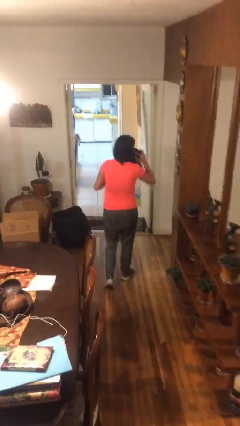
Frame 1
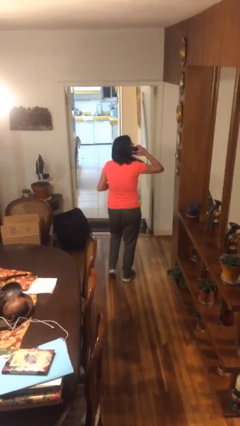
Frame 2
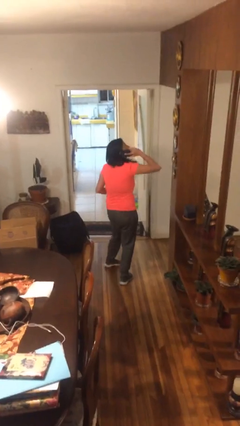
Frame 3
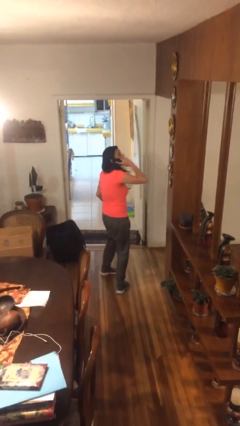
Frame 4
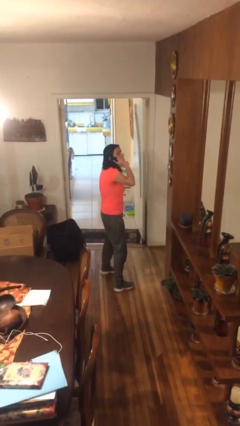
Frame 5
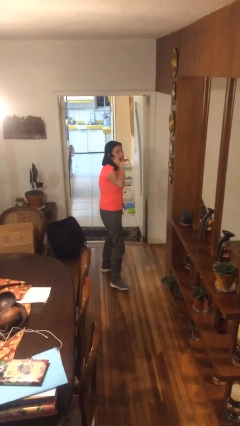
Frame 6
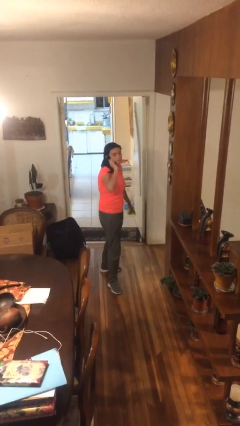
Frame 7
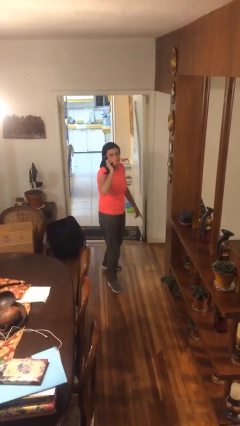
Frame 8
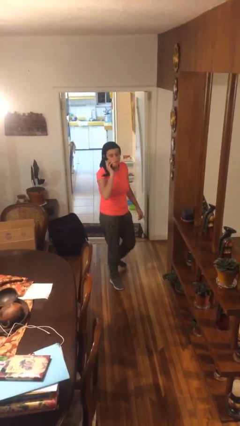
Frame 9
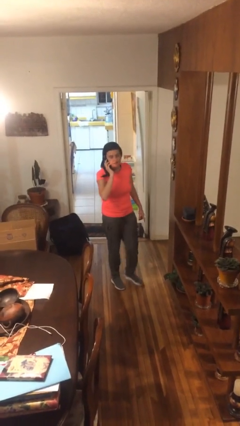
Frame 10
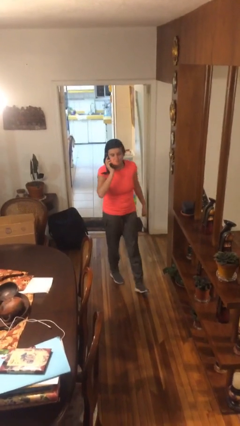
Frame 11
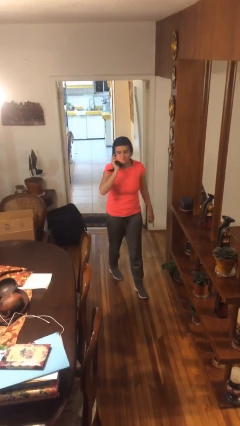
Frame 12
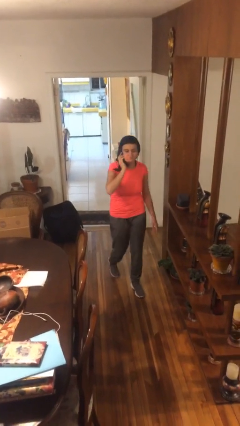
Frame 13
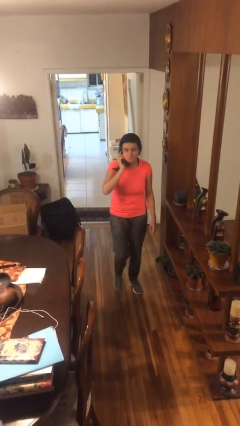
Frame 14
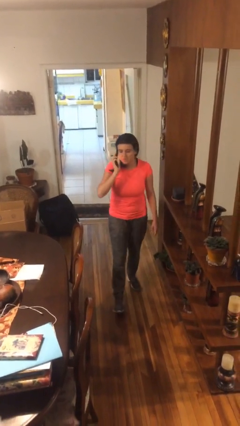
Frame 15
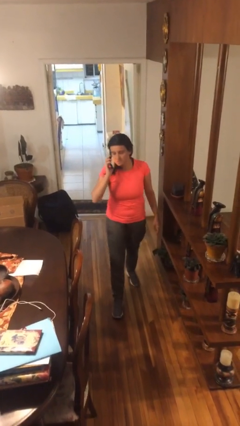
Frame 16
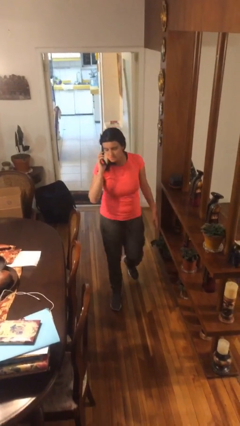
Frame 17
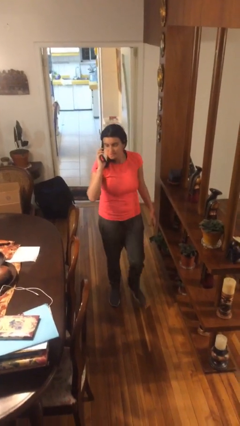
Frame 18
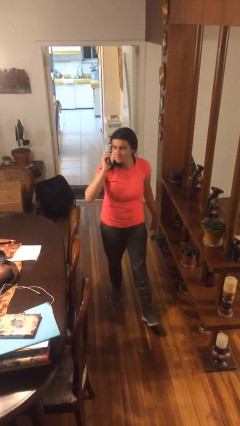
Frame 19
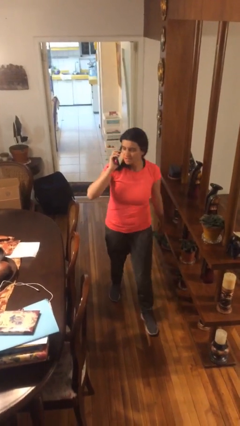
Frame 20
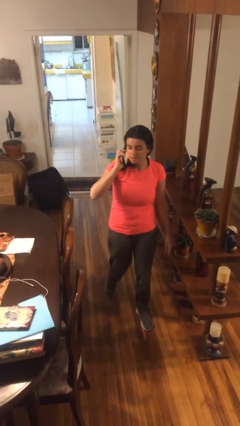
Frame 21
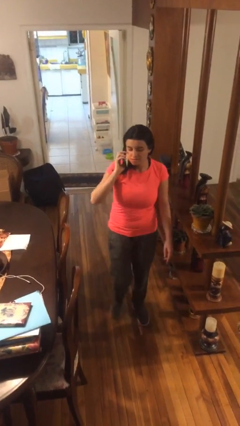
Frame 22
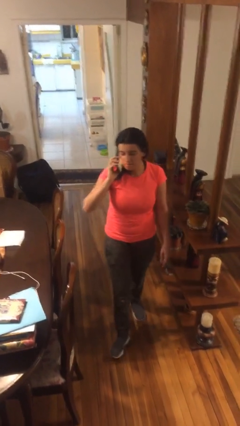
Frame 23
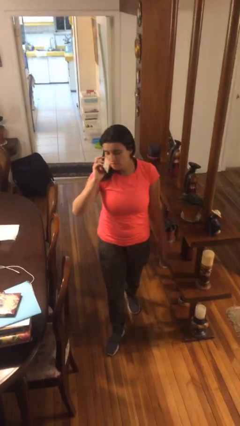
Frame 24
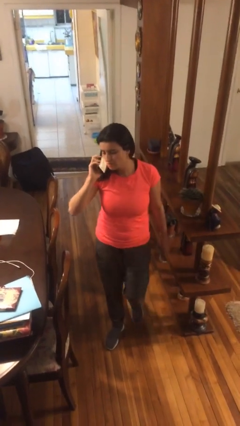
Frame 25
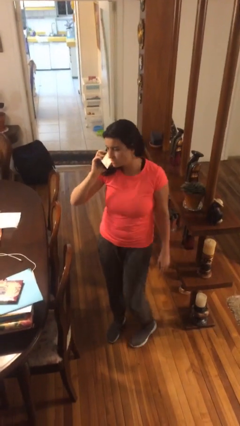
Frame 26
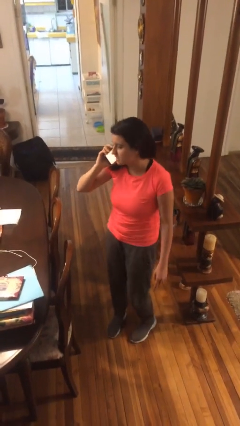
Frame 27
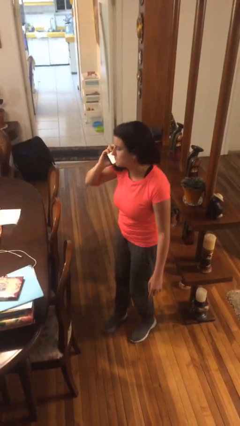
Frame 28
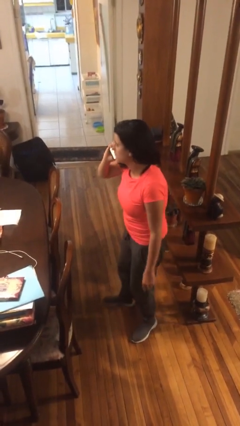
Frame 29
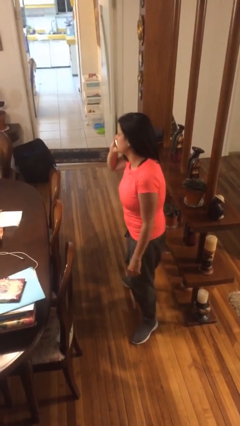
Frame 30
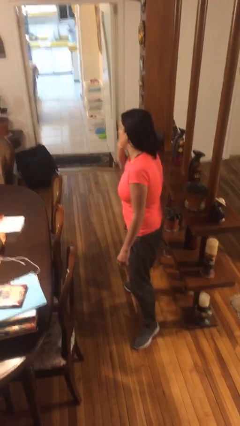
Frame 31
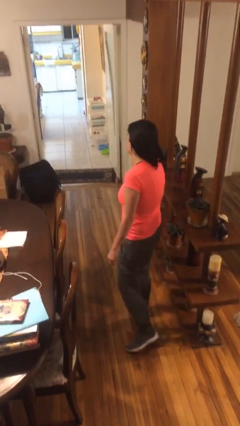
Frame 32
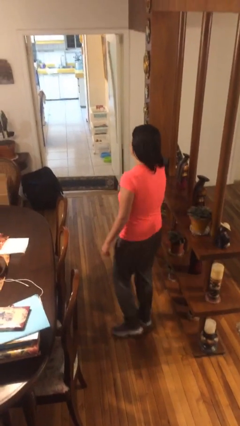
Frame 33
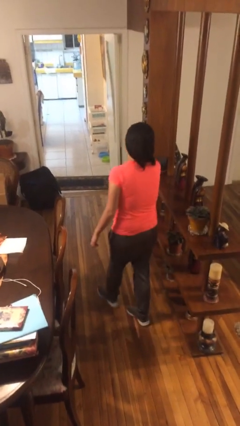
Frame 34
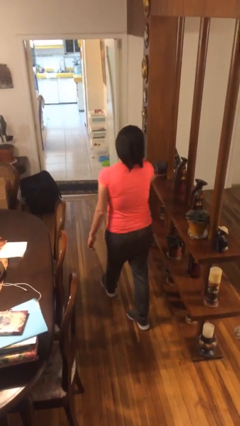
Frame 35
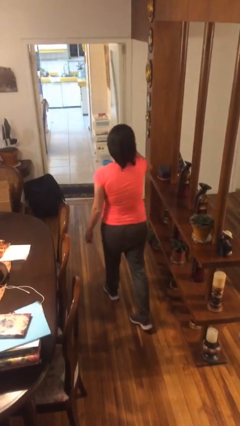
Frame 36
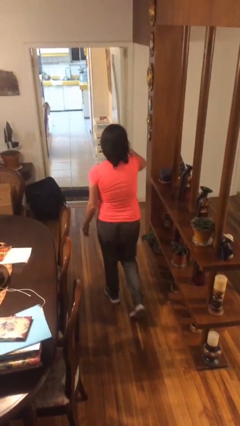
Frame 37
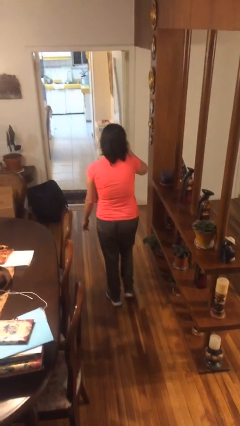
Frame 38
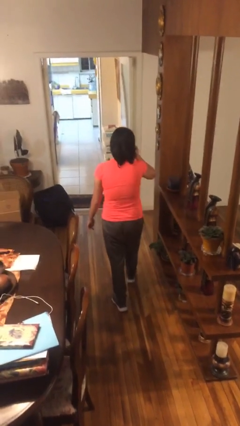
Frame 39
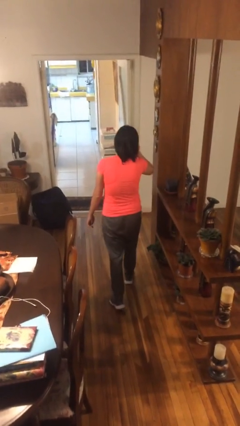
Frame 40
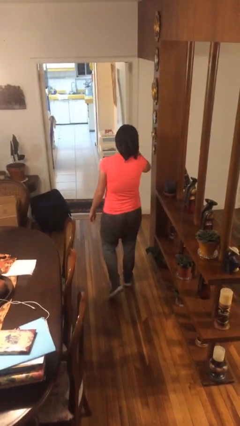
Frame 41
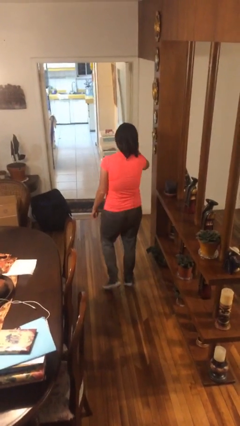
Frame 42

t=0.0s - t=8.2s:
person talks on phone

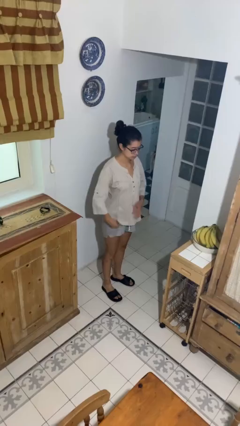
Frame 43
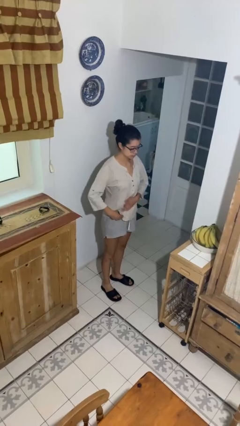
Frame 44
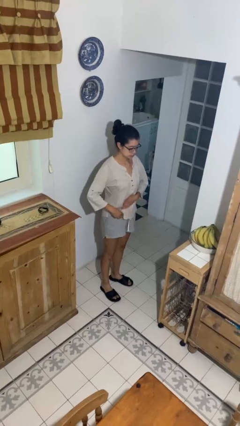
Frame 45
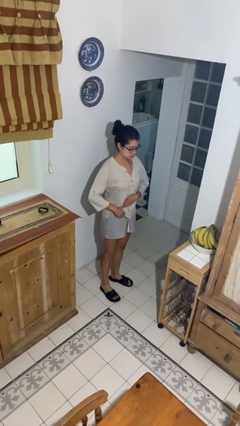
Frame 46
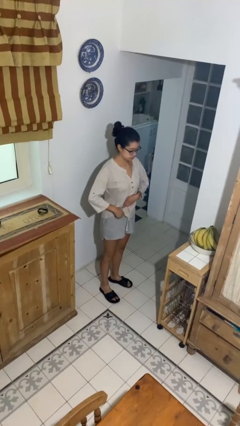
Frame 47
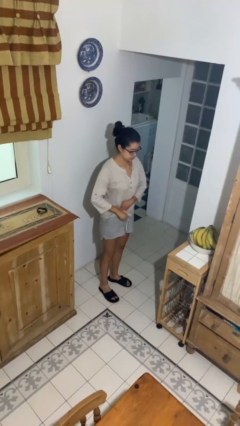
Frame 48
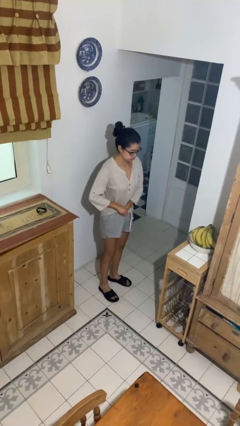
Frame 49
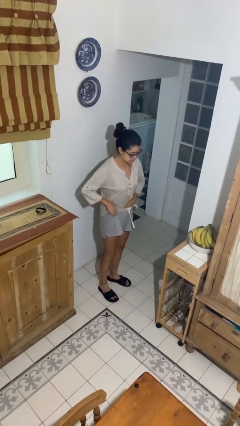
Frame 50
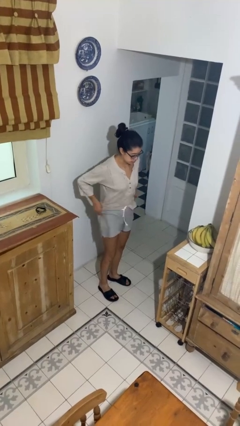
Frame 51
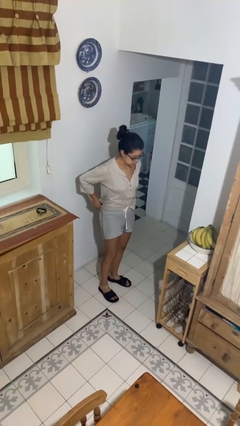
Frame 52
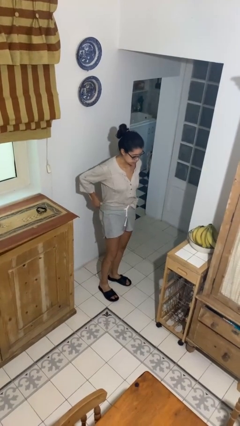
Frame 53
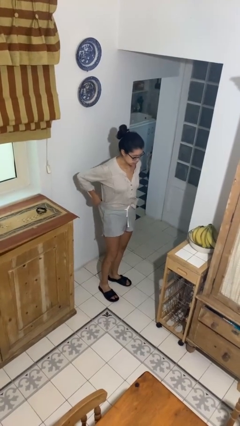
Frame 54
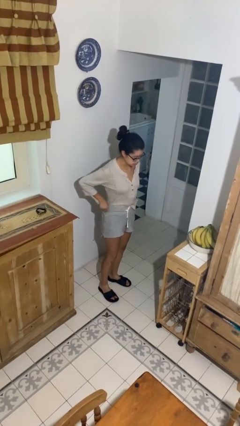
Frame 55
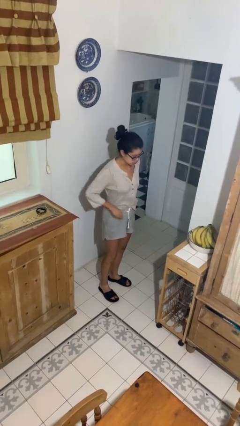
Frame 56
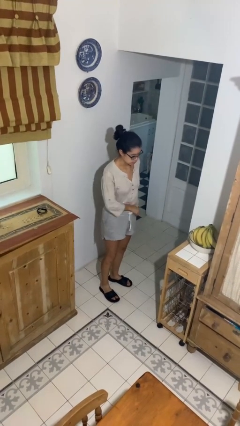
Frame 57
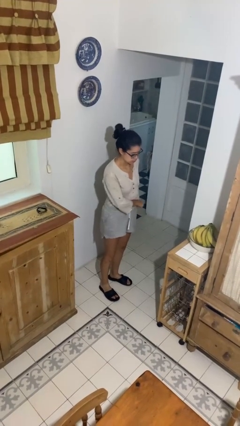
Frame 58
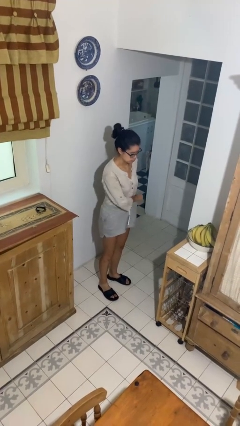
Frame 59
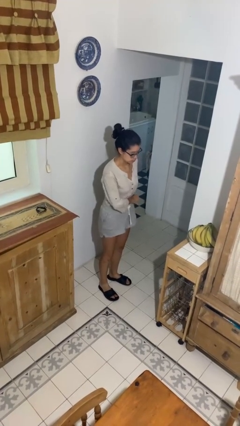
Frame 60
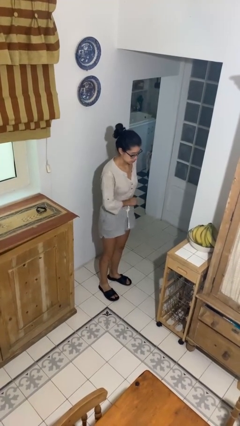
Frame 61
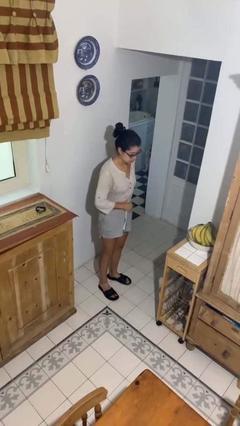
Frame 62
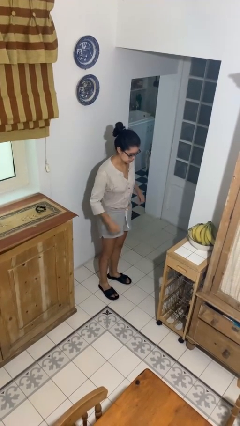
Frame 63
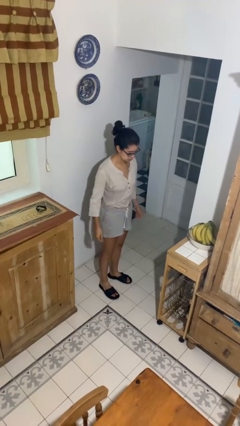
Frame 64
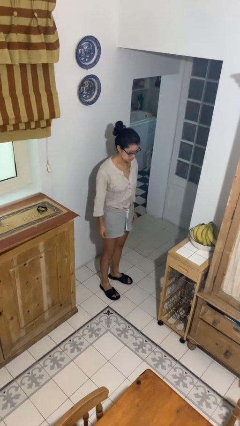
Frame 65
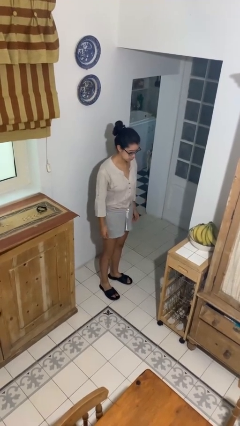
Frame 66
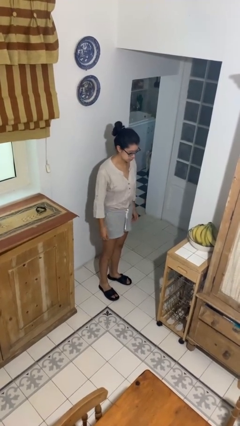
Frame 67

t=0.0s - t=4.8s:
person tucks in shirt

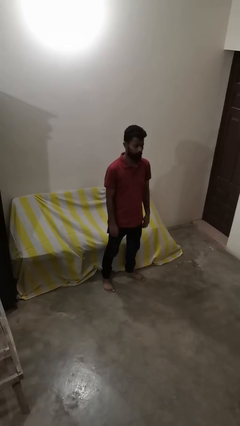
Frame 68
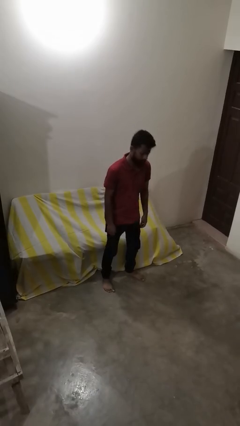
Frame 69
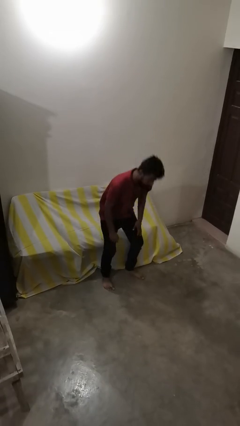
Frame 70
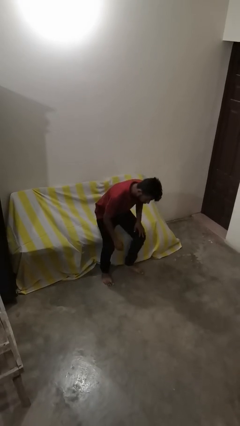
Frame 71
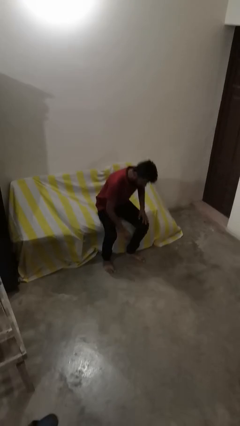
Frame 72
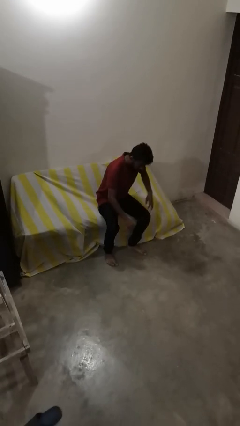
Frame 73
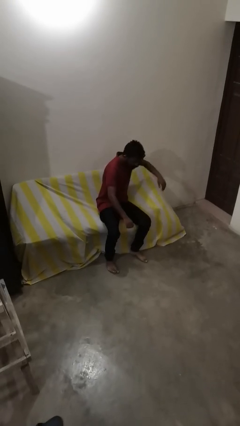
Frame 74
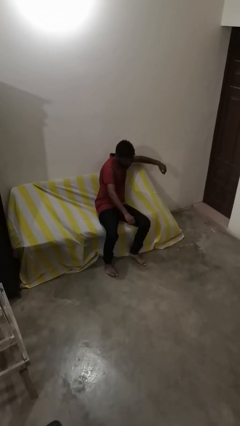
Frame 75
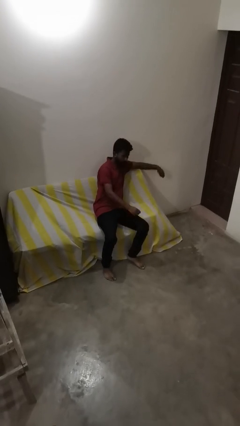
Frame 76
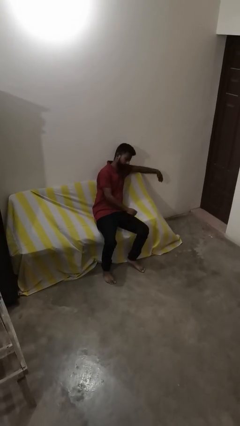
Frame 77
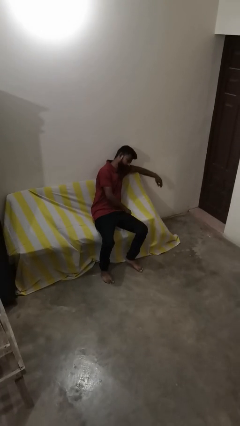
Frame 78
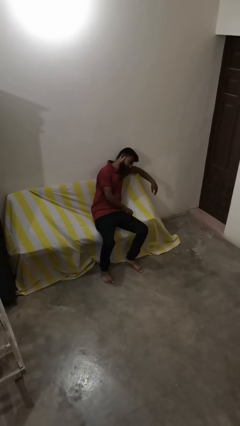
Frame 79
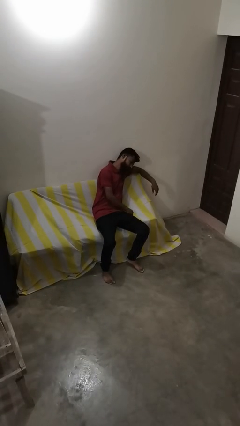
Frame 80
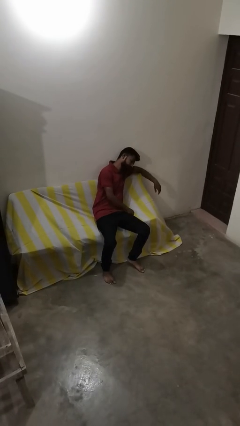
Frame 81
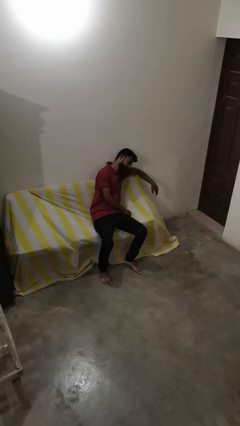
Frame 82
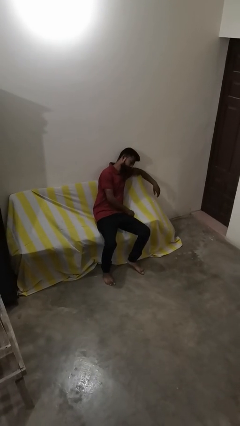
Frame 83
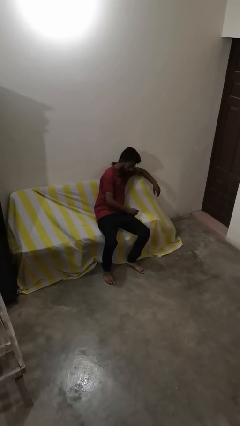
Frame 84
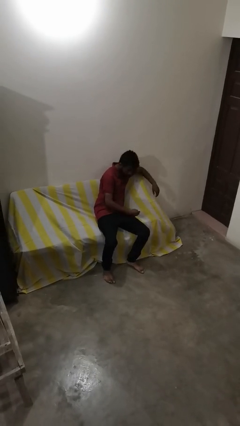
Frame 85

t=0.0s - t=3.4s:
person lies down on couch

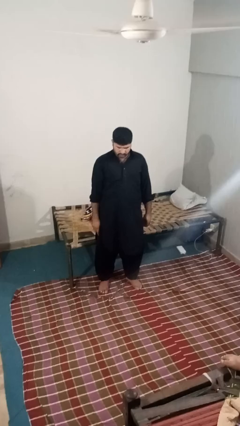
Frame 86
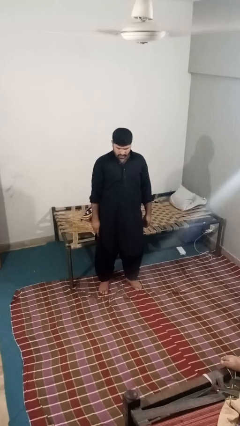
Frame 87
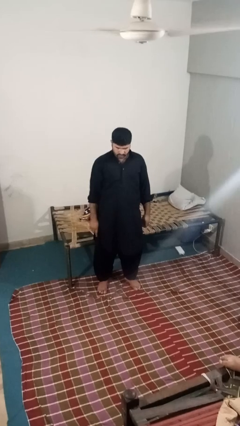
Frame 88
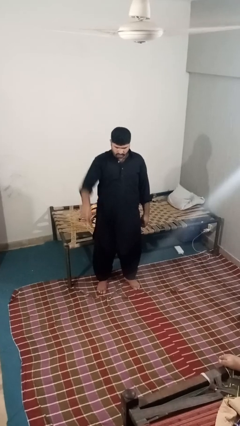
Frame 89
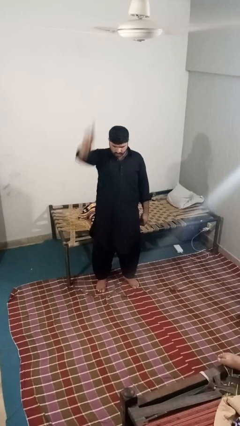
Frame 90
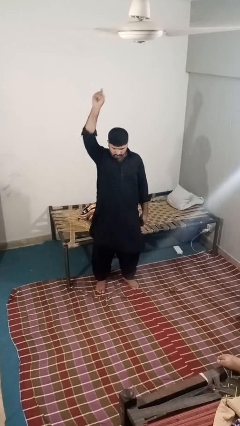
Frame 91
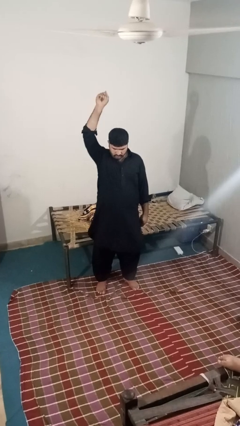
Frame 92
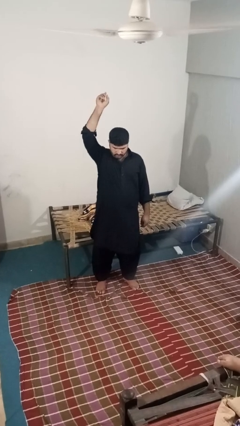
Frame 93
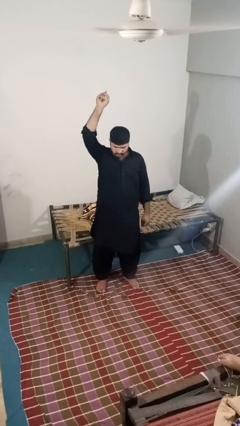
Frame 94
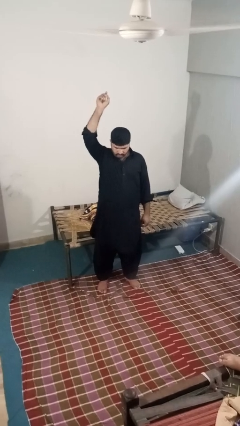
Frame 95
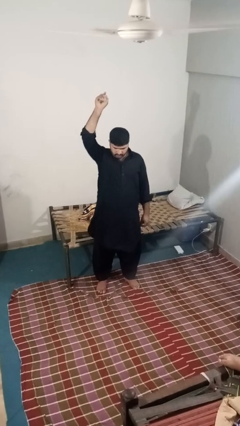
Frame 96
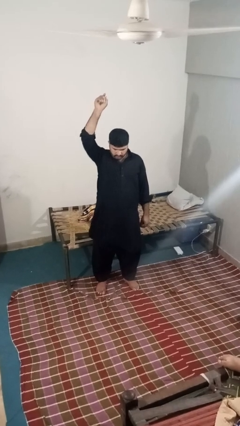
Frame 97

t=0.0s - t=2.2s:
person gestures swipe up
